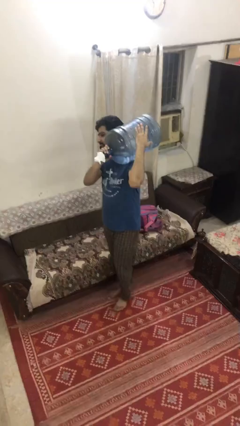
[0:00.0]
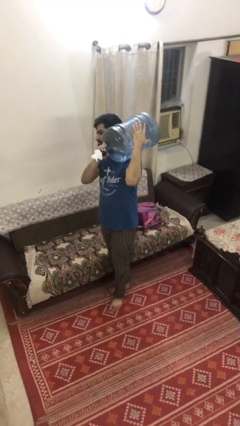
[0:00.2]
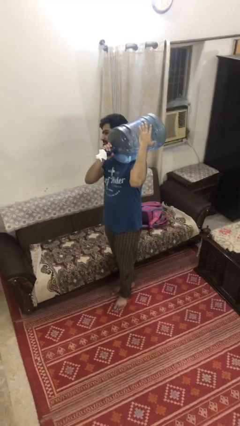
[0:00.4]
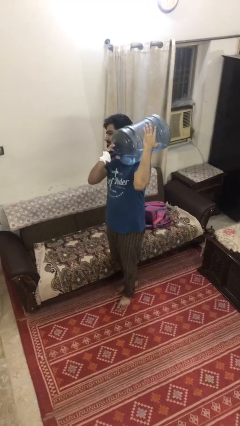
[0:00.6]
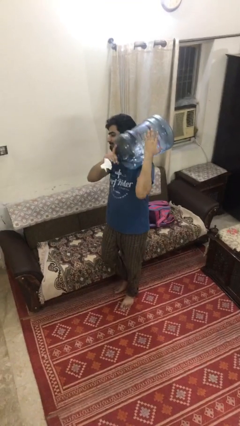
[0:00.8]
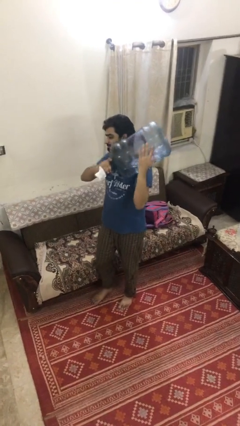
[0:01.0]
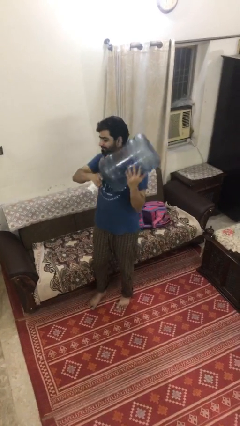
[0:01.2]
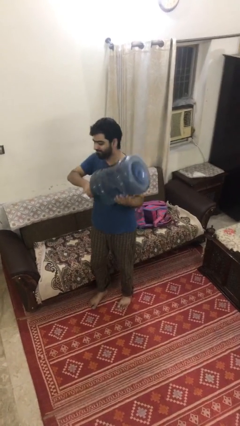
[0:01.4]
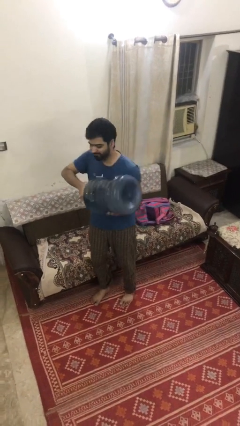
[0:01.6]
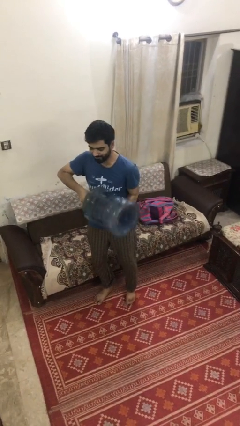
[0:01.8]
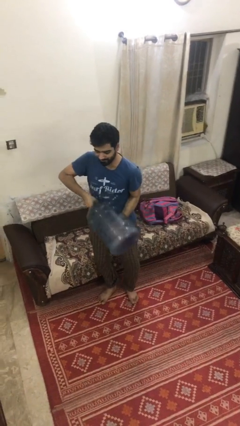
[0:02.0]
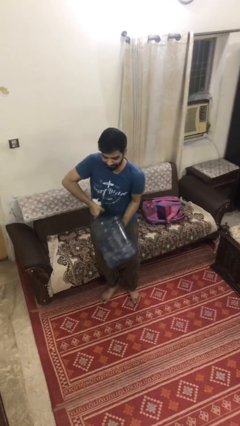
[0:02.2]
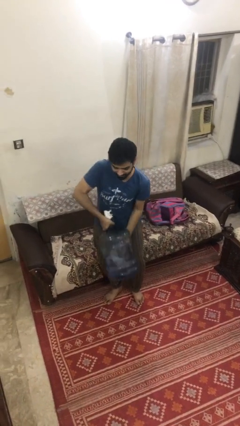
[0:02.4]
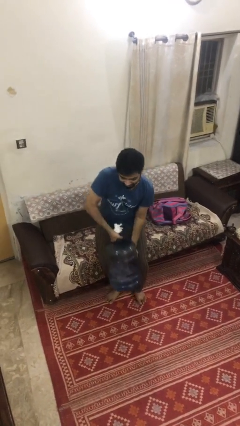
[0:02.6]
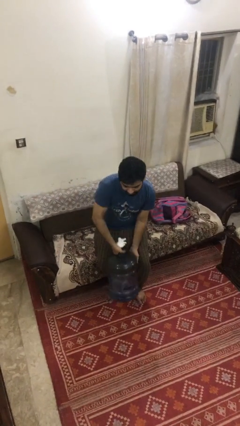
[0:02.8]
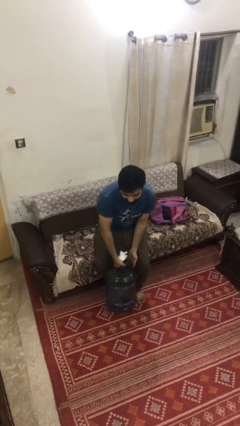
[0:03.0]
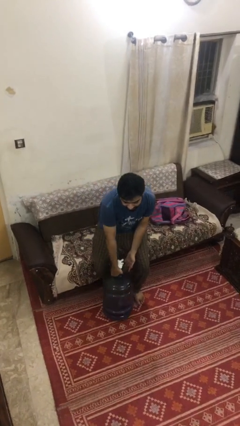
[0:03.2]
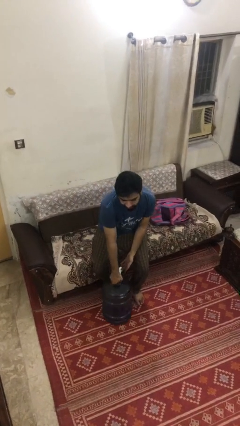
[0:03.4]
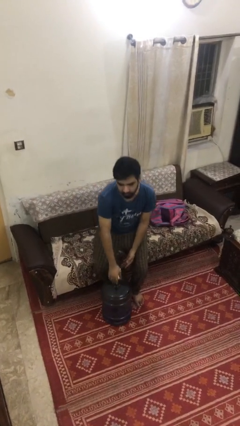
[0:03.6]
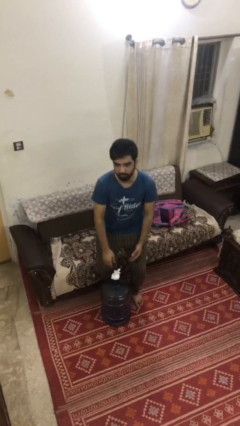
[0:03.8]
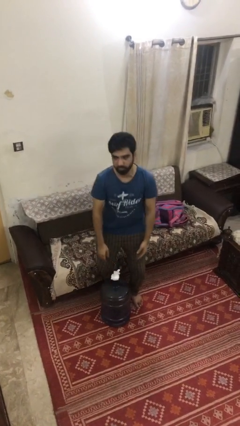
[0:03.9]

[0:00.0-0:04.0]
person puts down object on floor

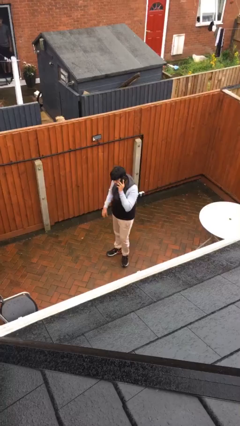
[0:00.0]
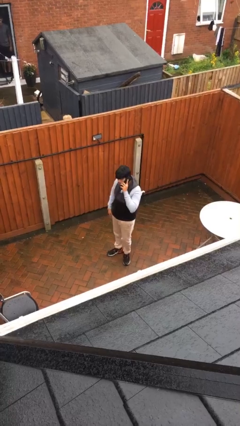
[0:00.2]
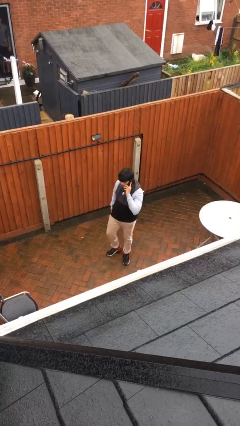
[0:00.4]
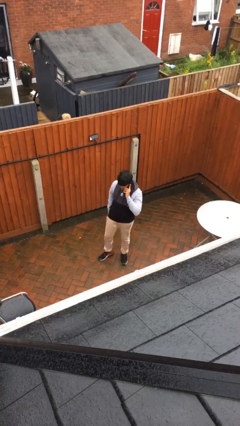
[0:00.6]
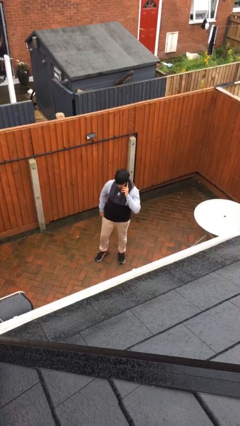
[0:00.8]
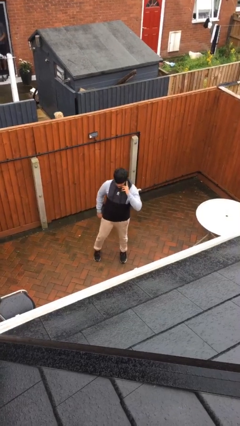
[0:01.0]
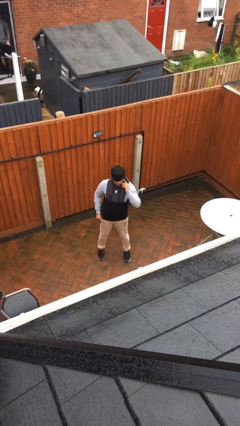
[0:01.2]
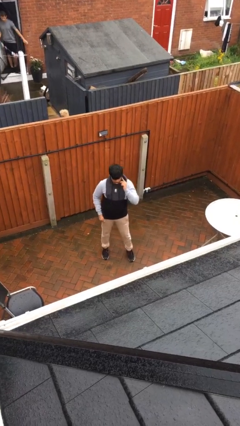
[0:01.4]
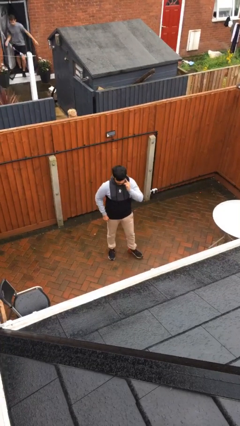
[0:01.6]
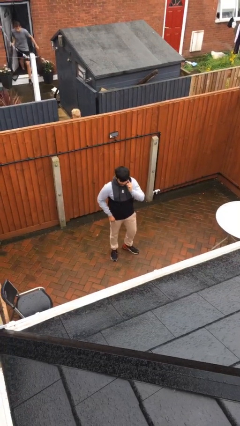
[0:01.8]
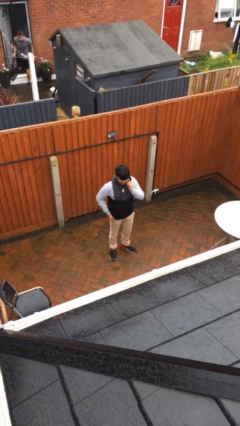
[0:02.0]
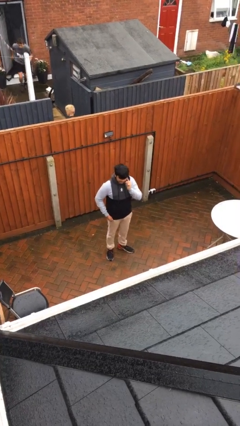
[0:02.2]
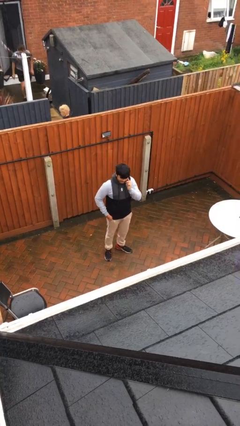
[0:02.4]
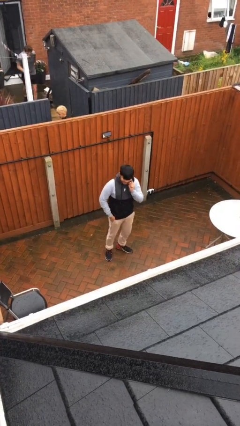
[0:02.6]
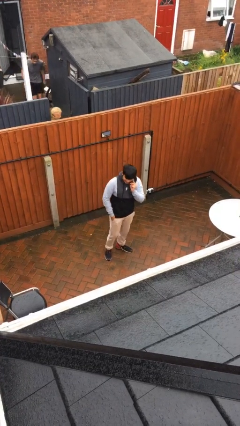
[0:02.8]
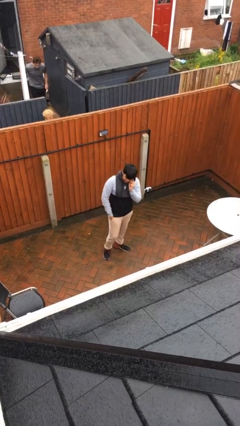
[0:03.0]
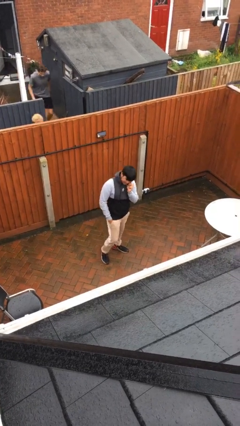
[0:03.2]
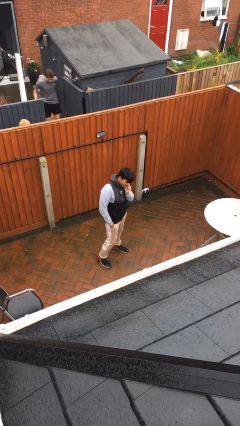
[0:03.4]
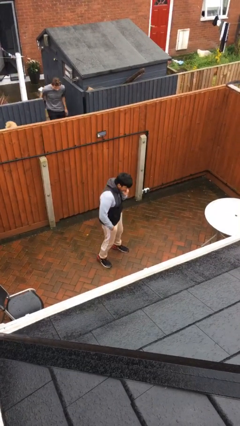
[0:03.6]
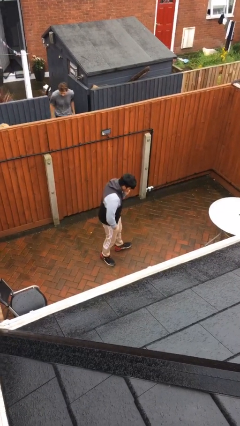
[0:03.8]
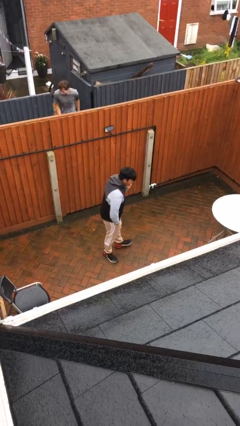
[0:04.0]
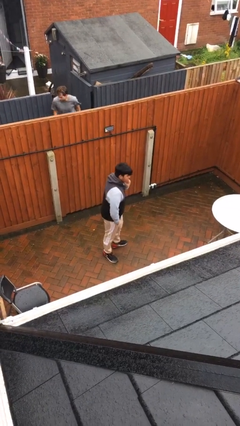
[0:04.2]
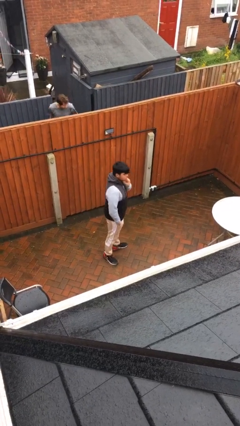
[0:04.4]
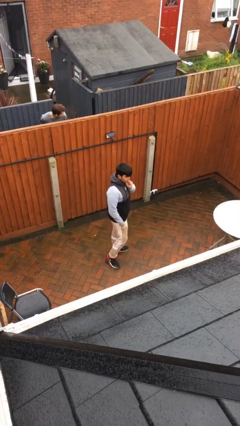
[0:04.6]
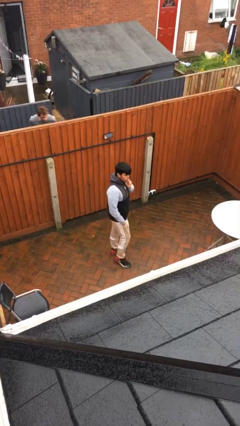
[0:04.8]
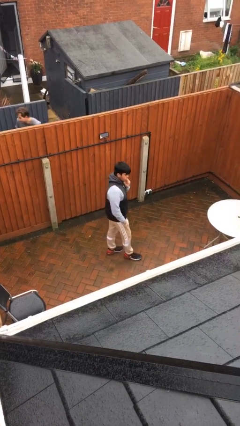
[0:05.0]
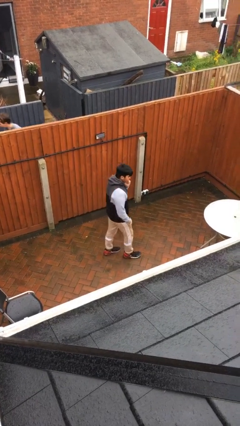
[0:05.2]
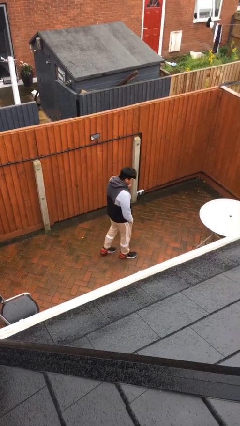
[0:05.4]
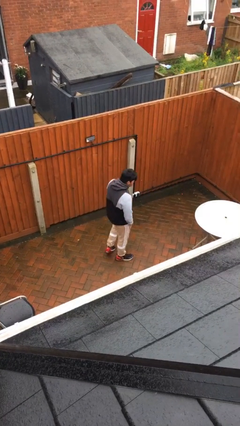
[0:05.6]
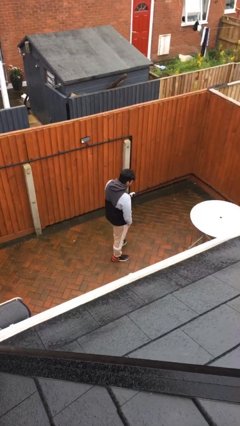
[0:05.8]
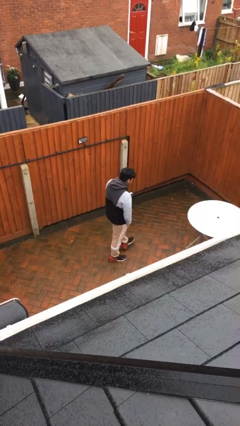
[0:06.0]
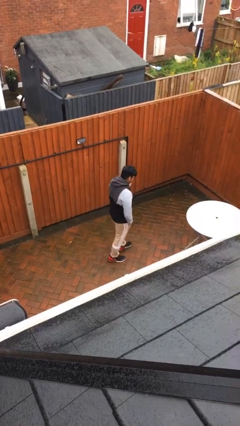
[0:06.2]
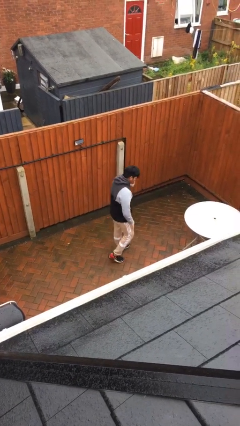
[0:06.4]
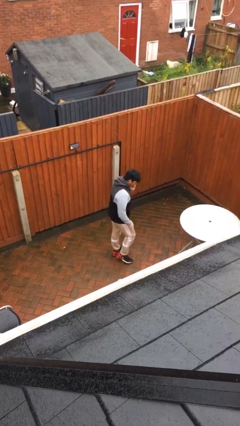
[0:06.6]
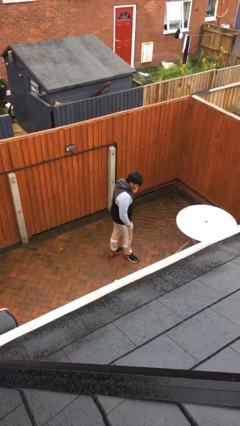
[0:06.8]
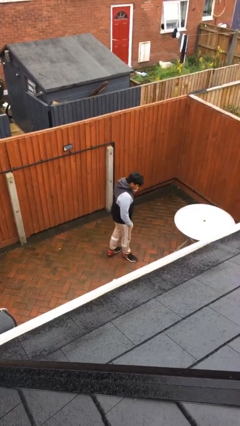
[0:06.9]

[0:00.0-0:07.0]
person talks on phone

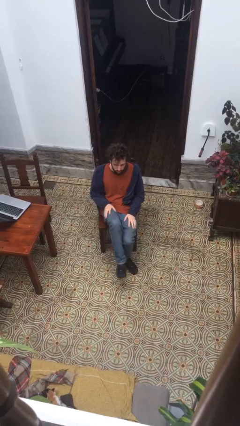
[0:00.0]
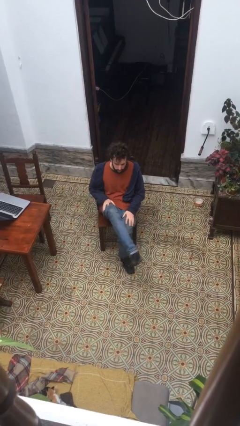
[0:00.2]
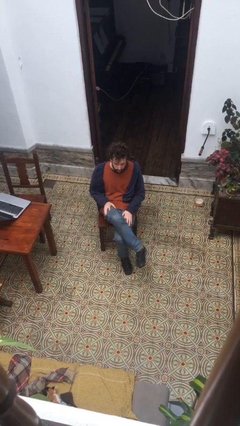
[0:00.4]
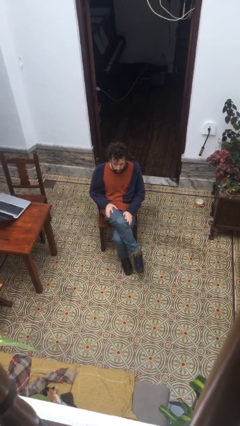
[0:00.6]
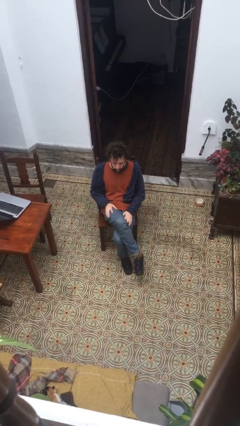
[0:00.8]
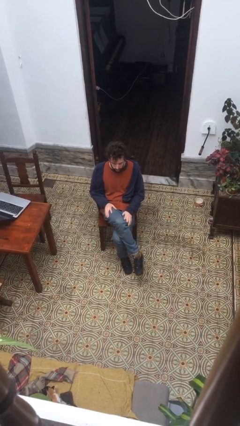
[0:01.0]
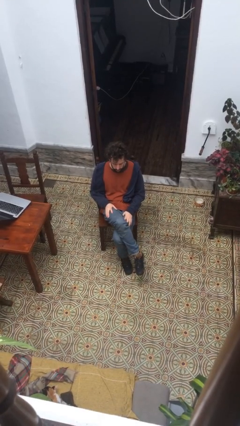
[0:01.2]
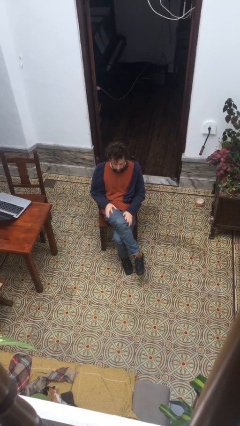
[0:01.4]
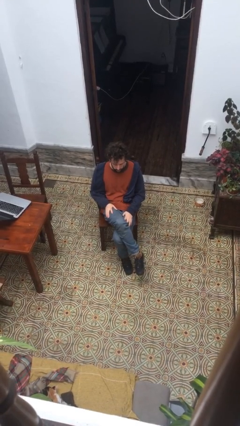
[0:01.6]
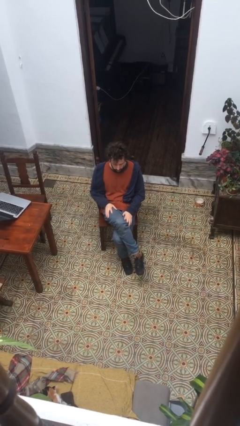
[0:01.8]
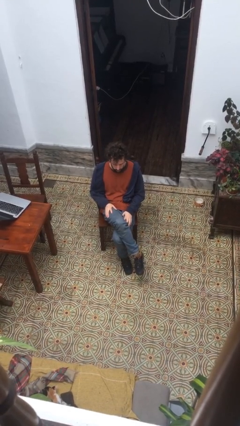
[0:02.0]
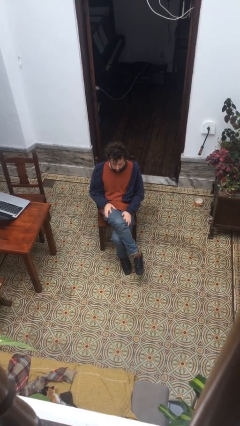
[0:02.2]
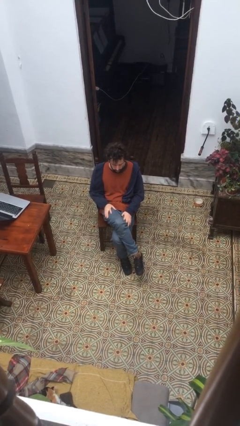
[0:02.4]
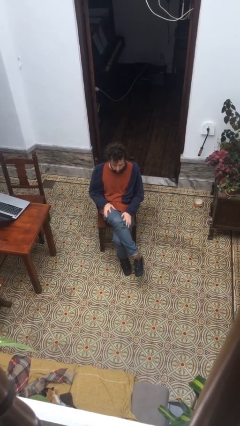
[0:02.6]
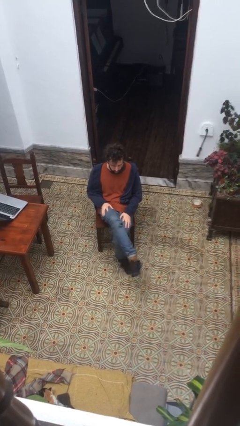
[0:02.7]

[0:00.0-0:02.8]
person crosses legs

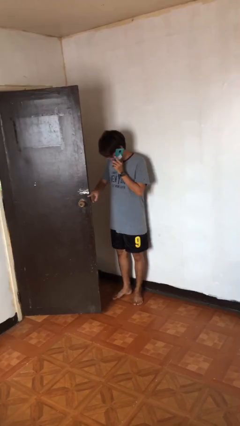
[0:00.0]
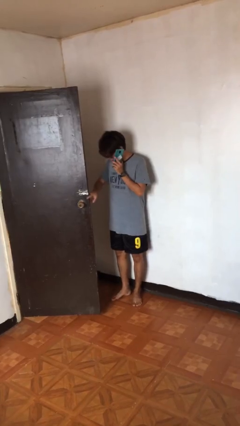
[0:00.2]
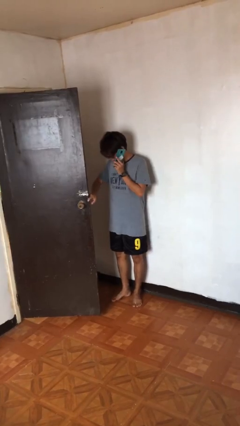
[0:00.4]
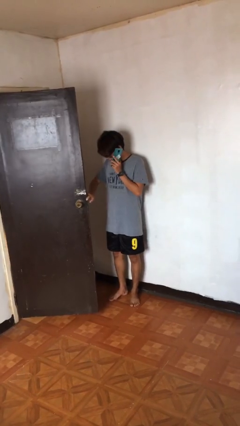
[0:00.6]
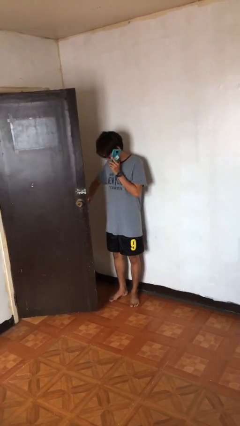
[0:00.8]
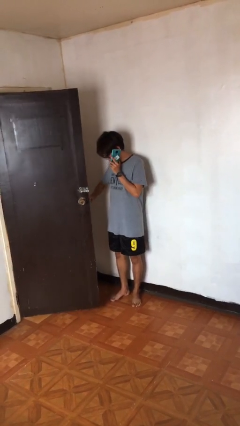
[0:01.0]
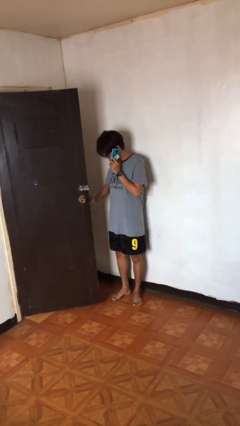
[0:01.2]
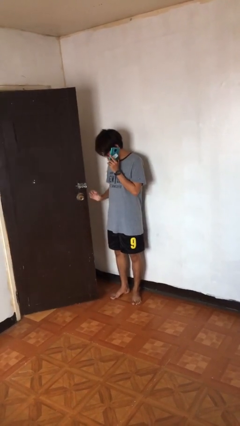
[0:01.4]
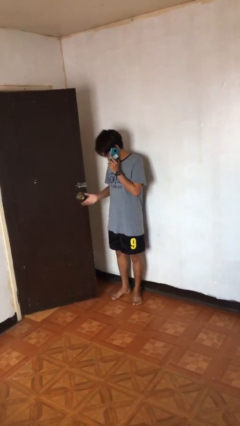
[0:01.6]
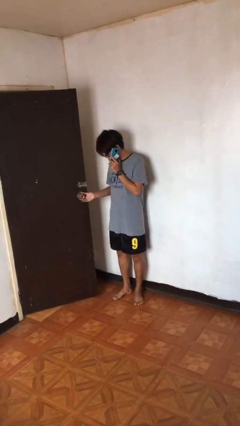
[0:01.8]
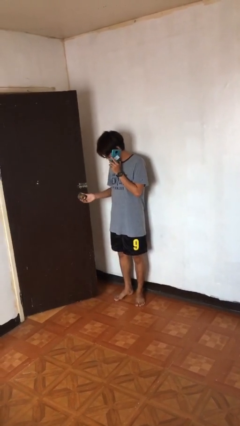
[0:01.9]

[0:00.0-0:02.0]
person enters scene through structure

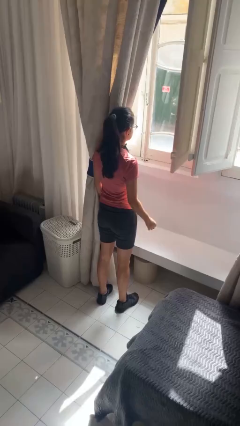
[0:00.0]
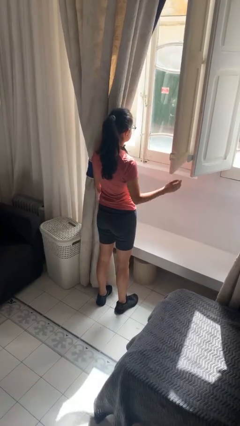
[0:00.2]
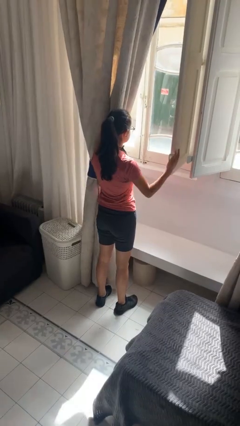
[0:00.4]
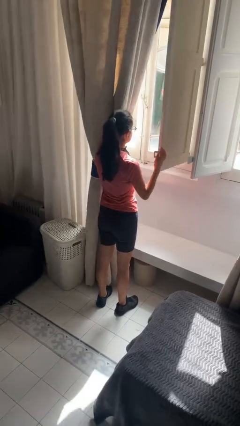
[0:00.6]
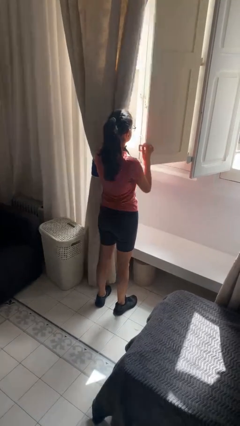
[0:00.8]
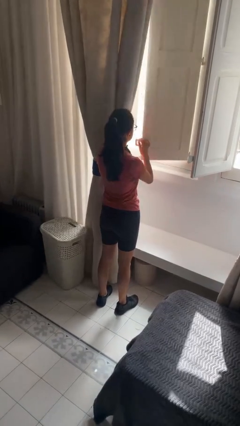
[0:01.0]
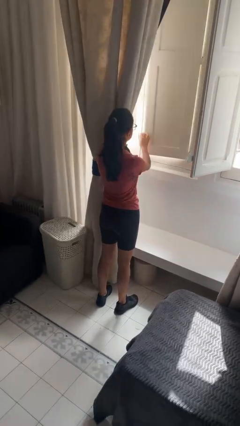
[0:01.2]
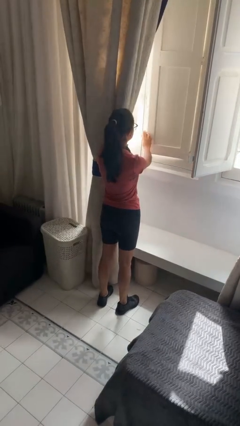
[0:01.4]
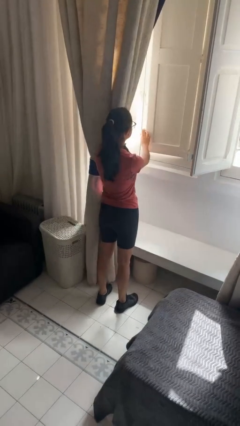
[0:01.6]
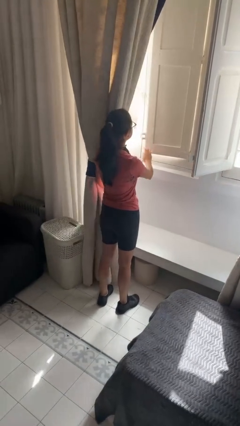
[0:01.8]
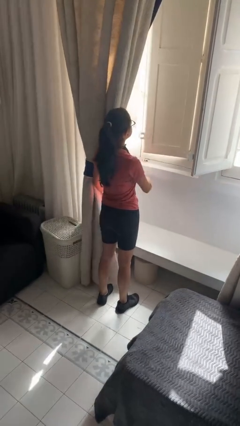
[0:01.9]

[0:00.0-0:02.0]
person closes home window

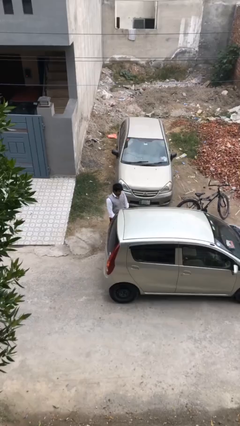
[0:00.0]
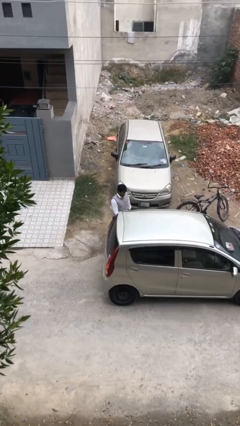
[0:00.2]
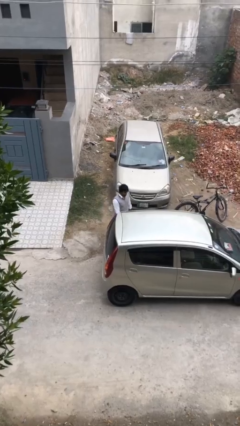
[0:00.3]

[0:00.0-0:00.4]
person opens car door
